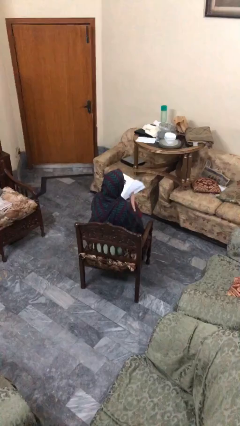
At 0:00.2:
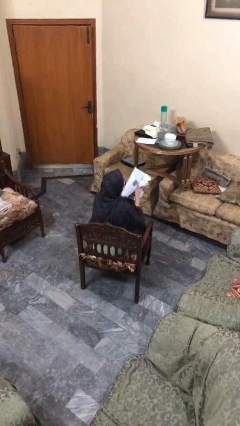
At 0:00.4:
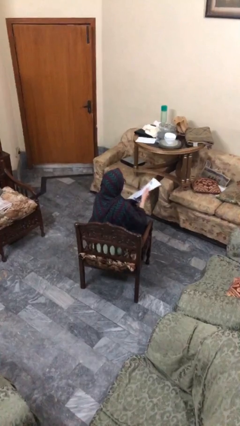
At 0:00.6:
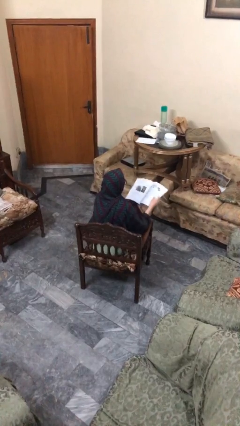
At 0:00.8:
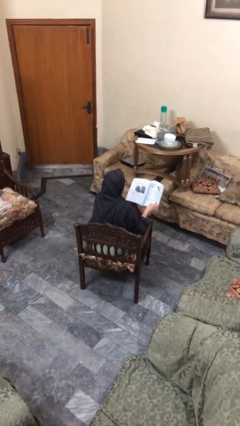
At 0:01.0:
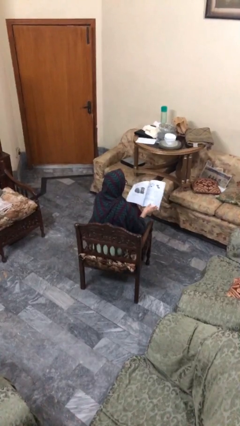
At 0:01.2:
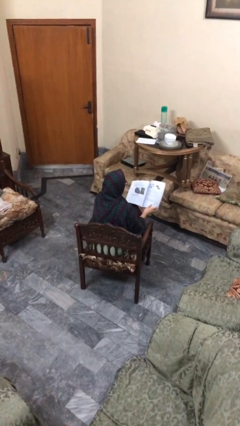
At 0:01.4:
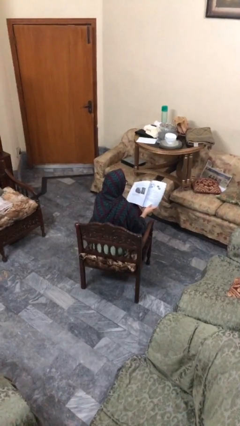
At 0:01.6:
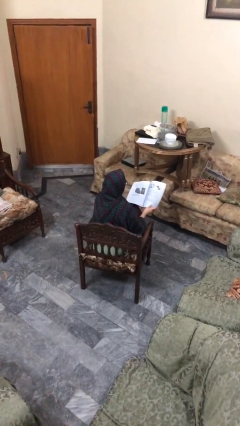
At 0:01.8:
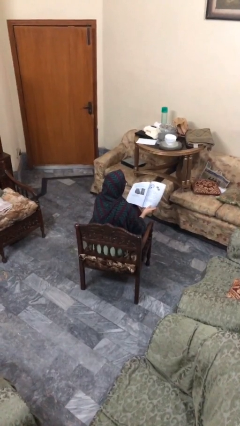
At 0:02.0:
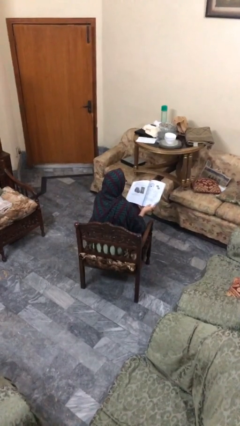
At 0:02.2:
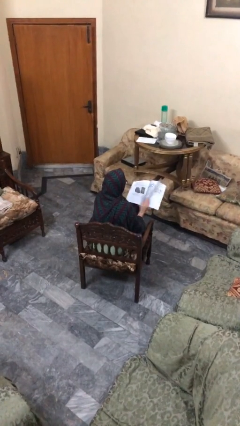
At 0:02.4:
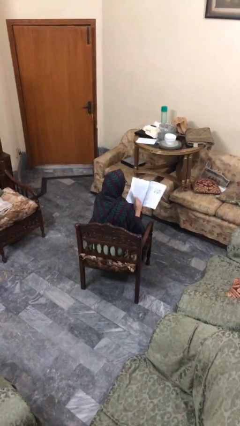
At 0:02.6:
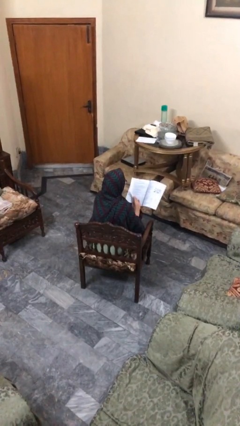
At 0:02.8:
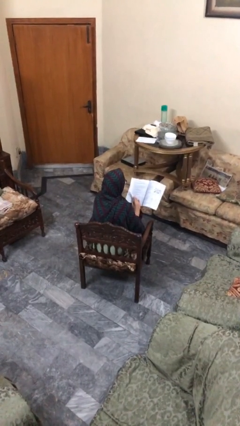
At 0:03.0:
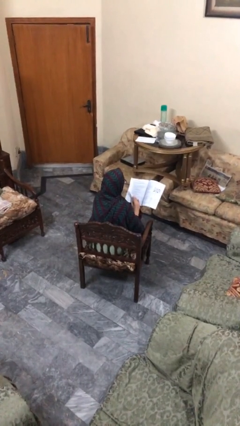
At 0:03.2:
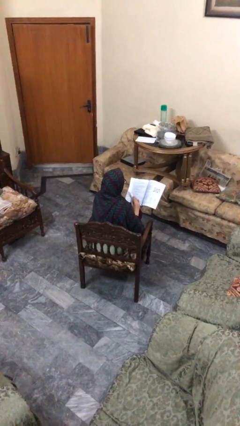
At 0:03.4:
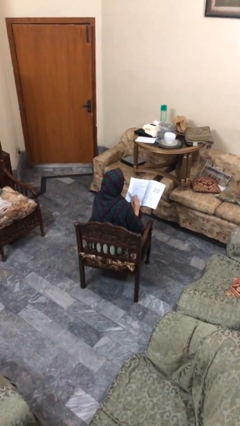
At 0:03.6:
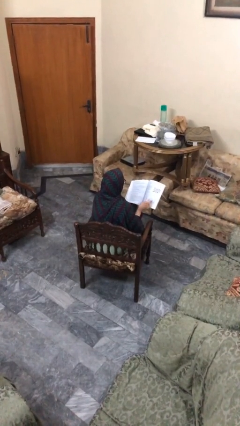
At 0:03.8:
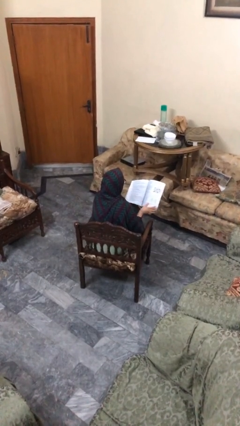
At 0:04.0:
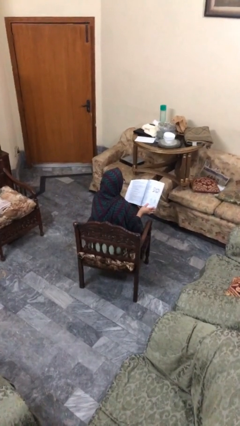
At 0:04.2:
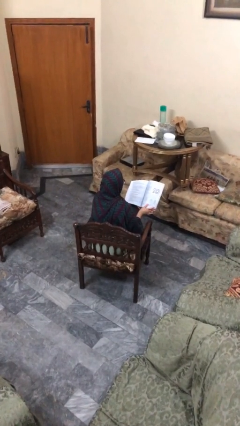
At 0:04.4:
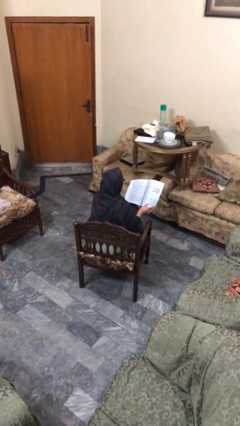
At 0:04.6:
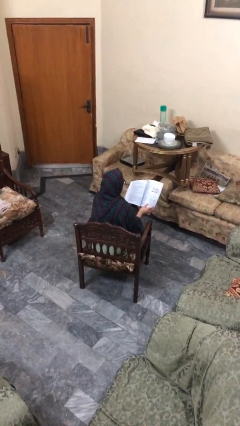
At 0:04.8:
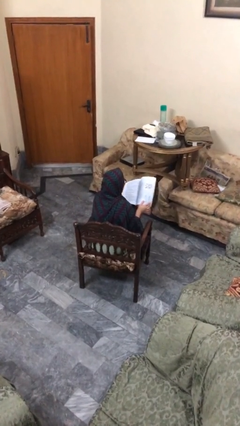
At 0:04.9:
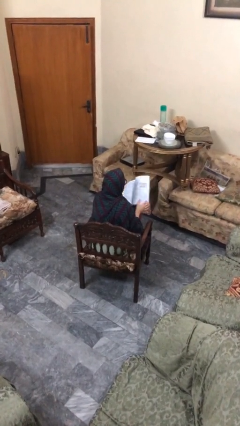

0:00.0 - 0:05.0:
person reads book

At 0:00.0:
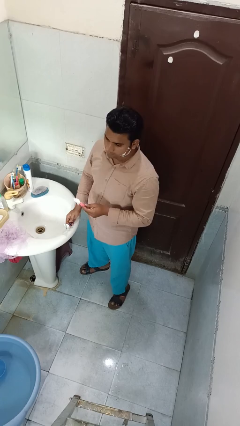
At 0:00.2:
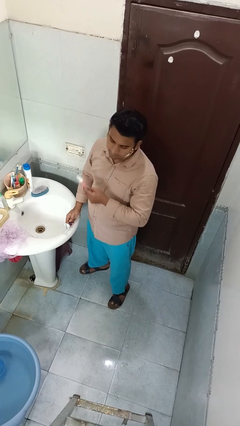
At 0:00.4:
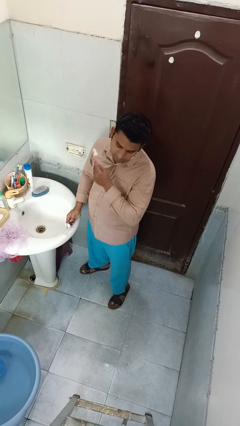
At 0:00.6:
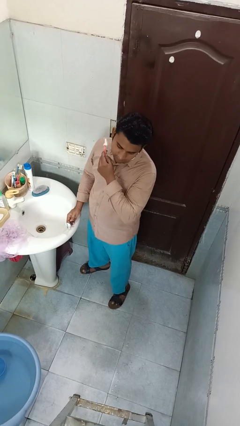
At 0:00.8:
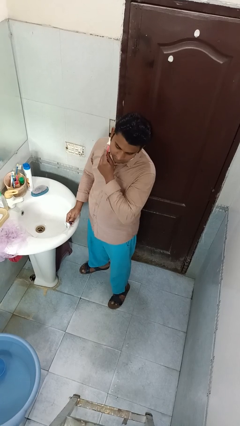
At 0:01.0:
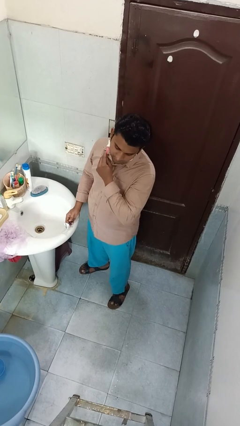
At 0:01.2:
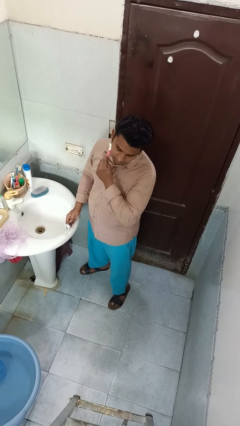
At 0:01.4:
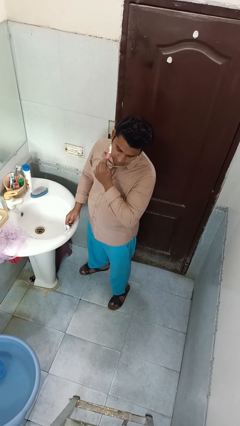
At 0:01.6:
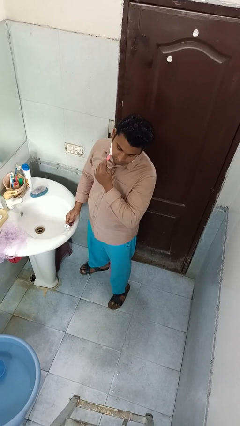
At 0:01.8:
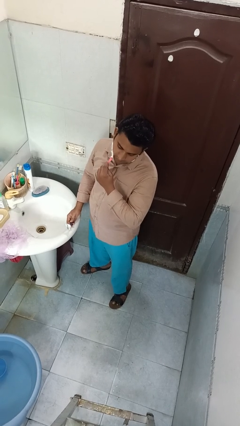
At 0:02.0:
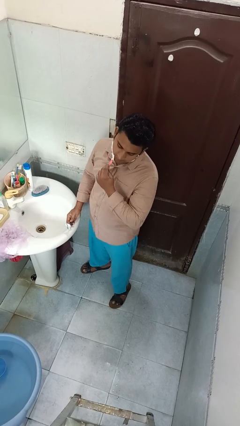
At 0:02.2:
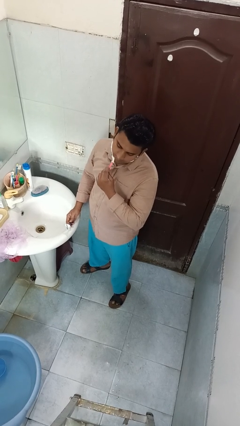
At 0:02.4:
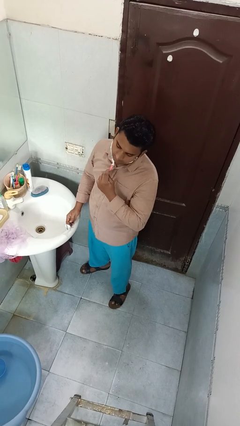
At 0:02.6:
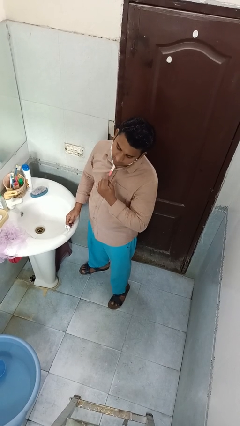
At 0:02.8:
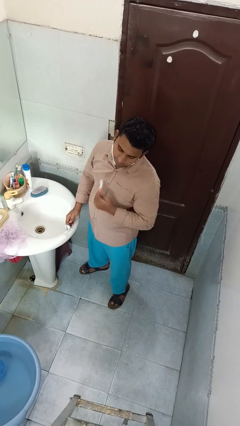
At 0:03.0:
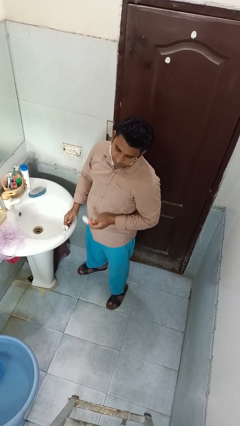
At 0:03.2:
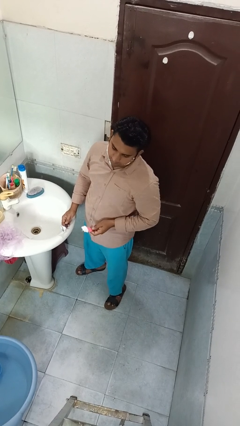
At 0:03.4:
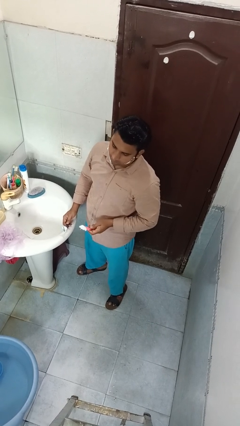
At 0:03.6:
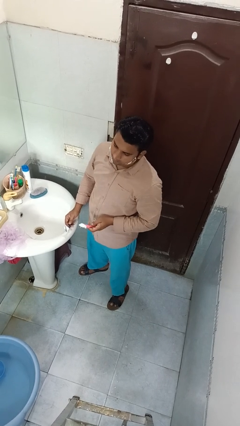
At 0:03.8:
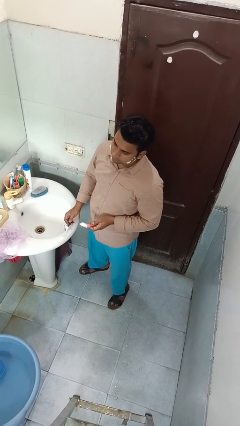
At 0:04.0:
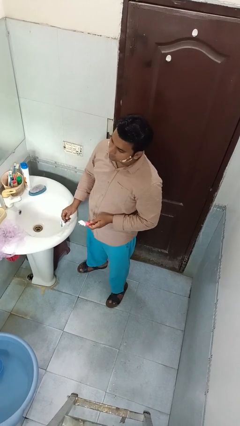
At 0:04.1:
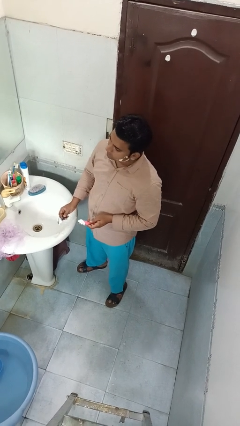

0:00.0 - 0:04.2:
person applies shaving cream

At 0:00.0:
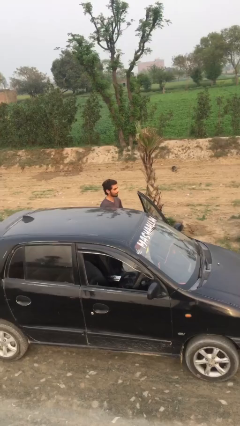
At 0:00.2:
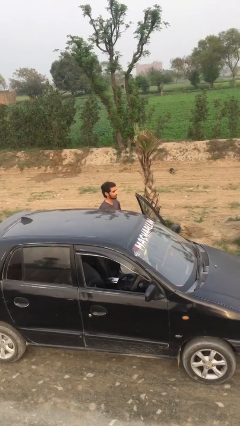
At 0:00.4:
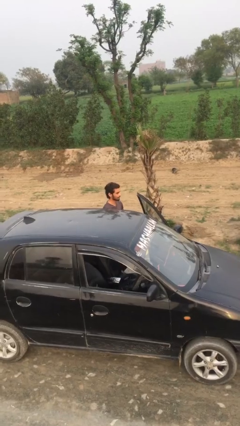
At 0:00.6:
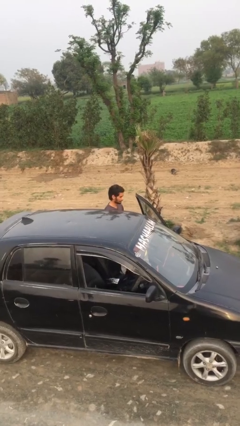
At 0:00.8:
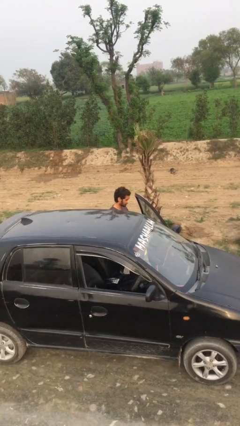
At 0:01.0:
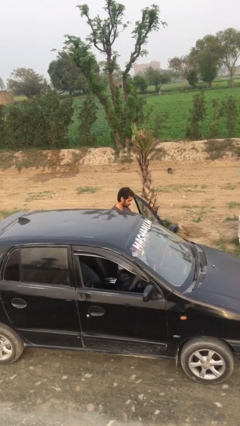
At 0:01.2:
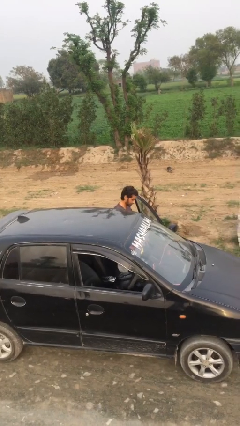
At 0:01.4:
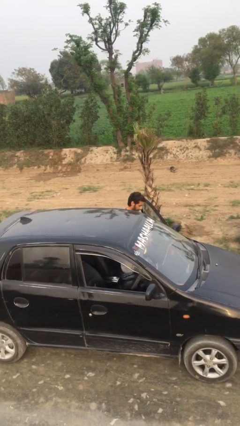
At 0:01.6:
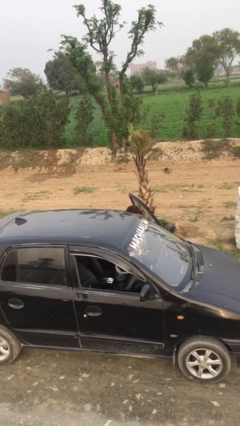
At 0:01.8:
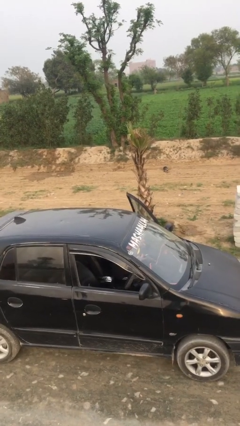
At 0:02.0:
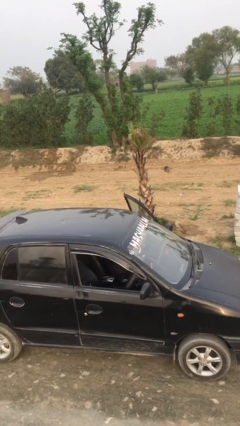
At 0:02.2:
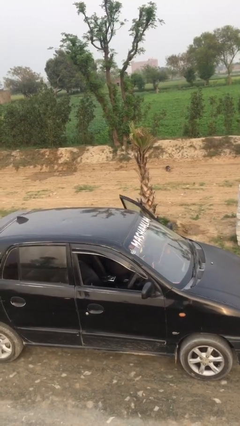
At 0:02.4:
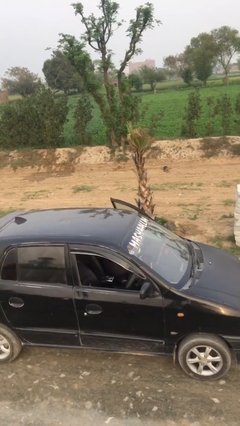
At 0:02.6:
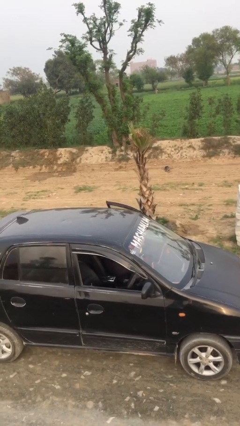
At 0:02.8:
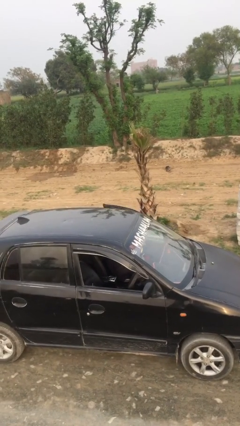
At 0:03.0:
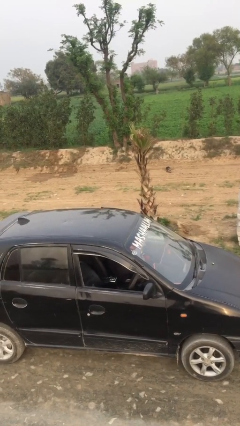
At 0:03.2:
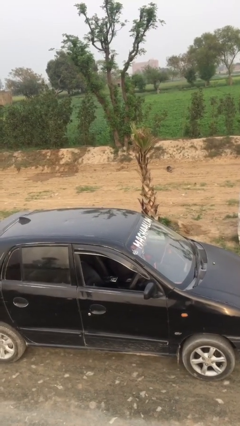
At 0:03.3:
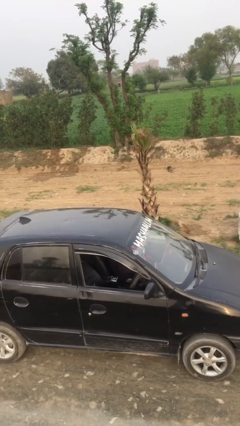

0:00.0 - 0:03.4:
person enters car

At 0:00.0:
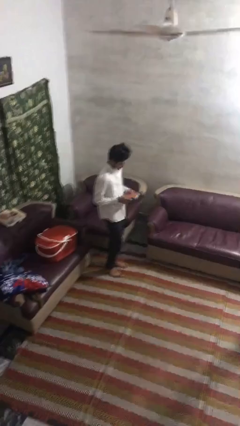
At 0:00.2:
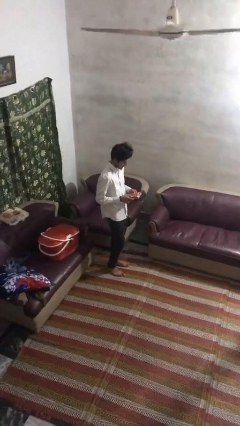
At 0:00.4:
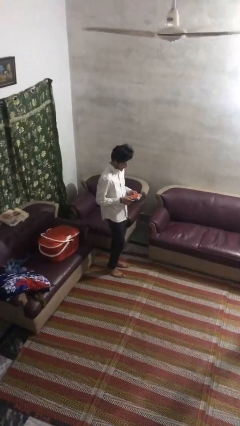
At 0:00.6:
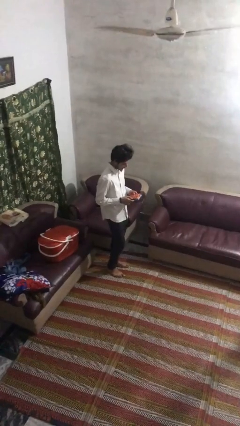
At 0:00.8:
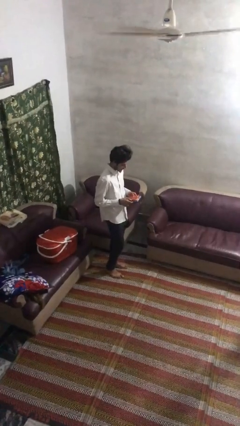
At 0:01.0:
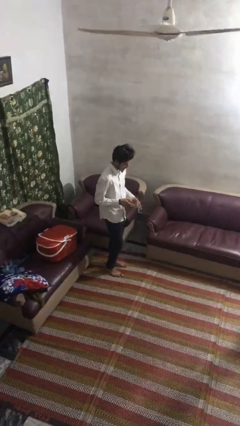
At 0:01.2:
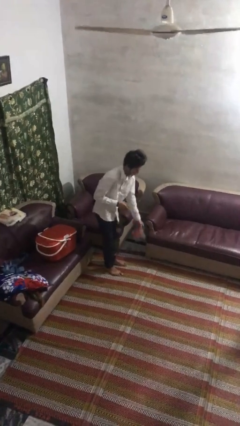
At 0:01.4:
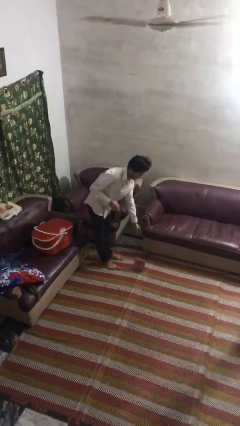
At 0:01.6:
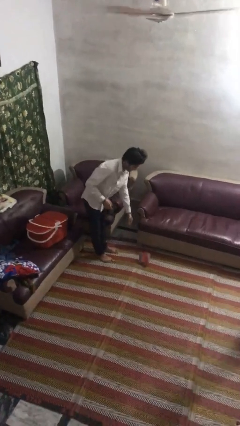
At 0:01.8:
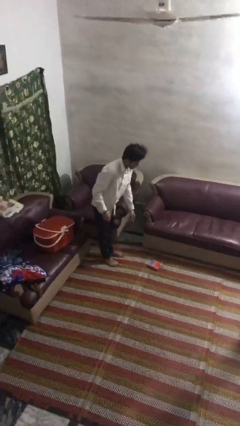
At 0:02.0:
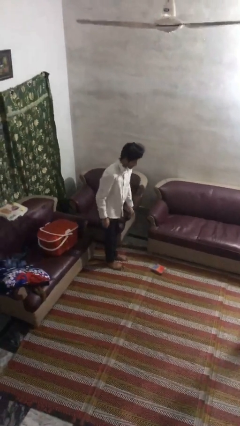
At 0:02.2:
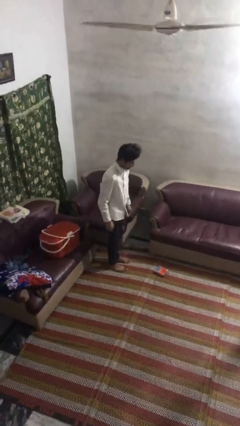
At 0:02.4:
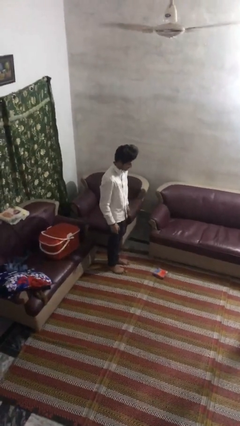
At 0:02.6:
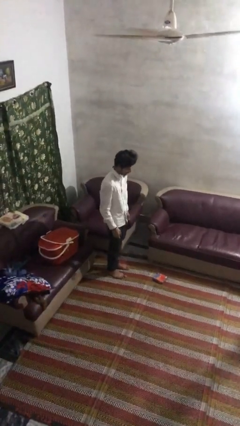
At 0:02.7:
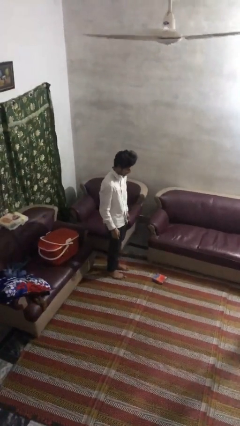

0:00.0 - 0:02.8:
person drops object

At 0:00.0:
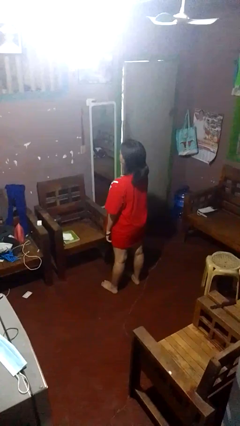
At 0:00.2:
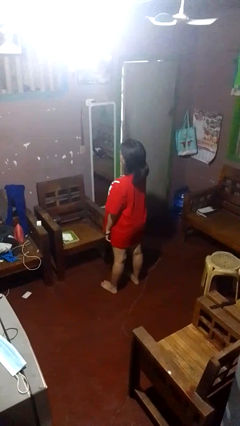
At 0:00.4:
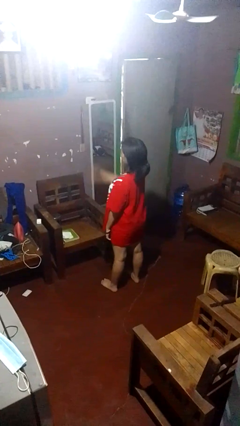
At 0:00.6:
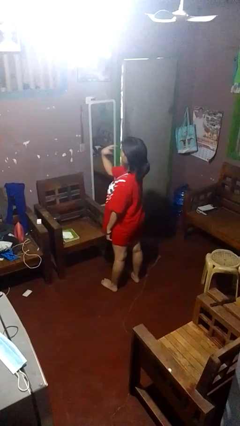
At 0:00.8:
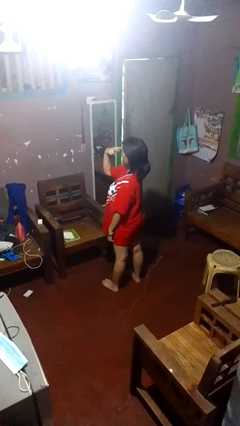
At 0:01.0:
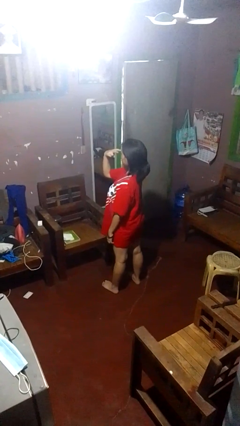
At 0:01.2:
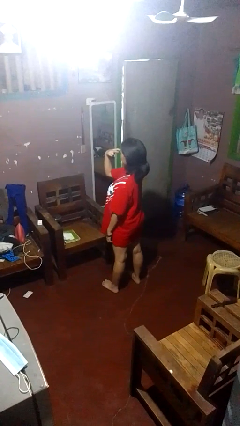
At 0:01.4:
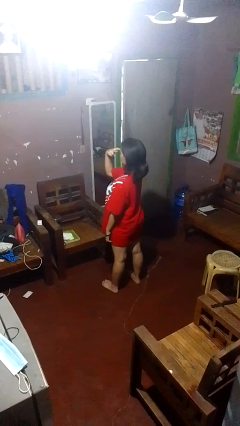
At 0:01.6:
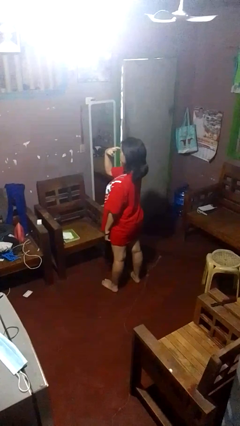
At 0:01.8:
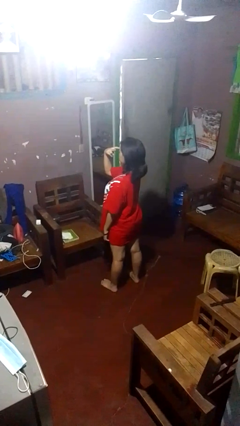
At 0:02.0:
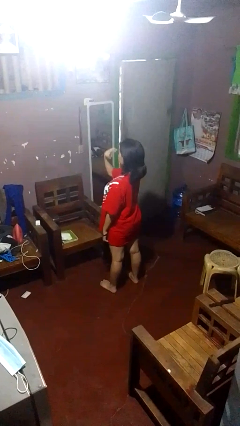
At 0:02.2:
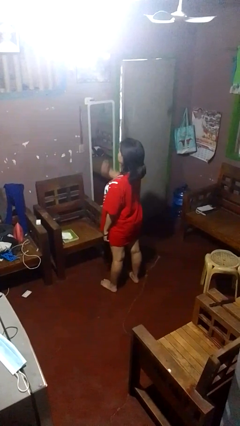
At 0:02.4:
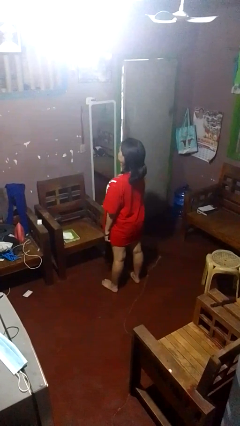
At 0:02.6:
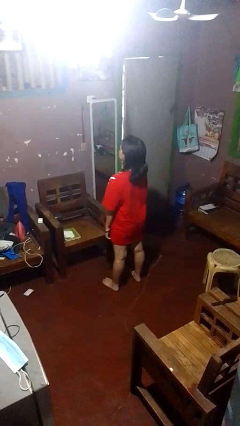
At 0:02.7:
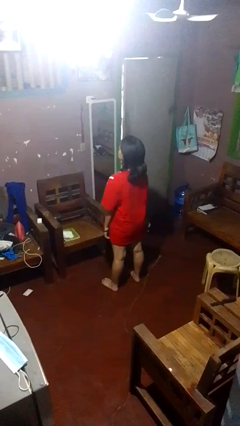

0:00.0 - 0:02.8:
person gestures watch closely
